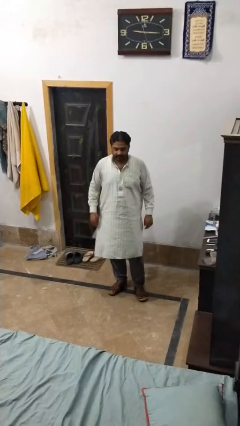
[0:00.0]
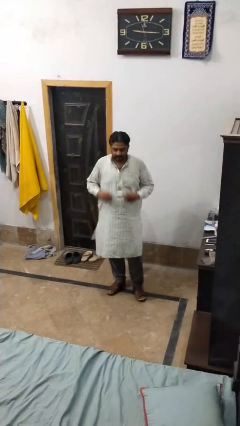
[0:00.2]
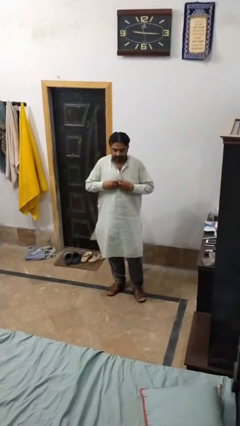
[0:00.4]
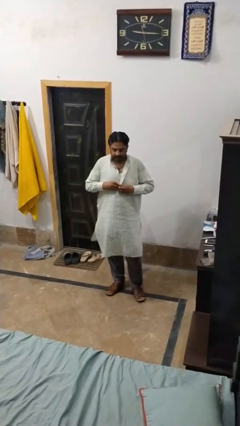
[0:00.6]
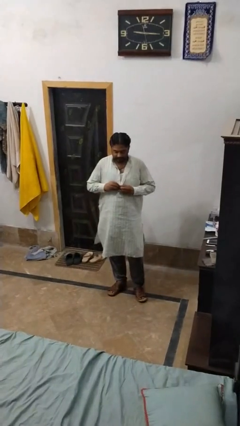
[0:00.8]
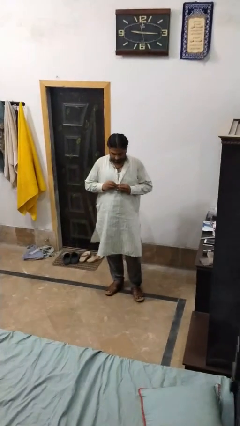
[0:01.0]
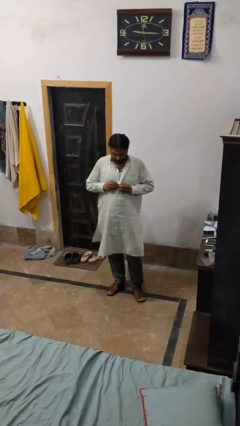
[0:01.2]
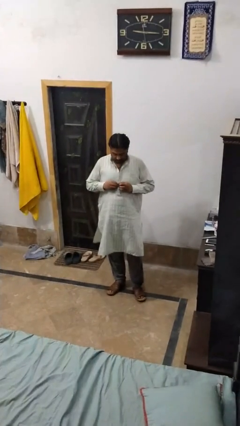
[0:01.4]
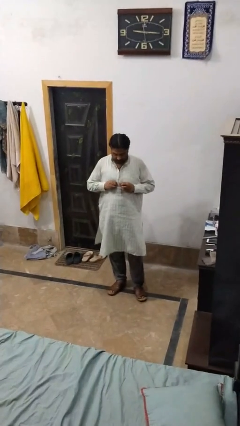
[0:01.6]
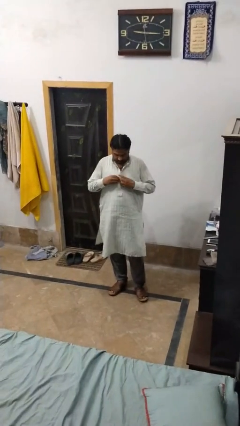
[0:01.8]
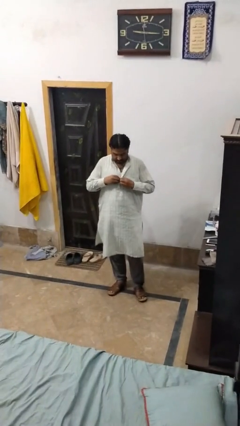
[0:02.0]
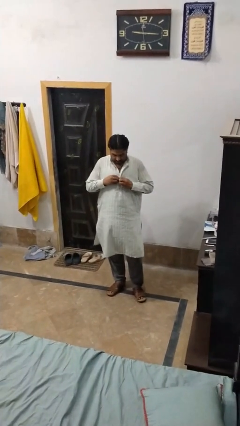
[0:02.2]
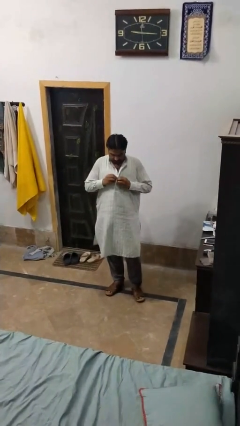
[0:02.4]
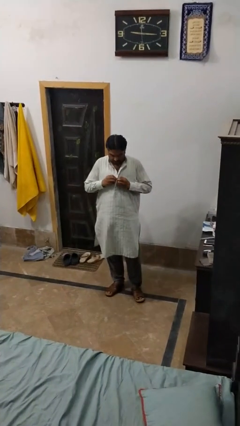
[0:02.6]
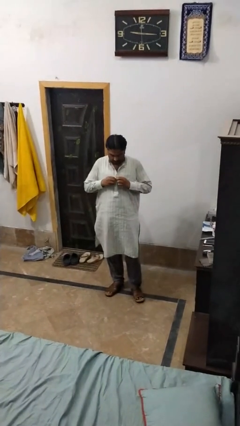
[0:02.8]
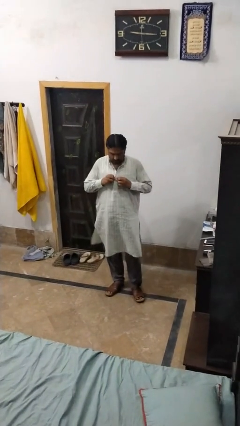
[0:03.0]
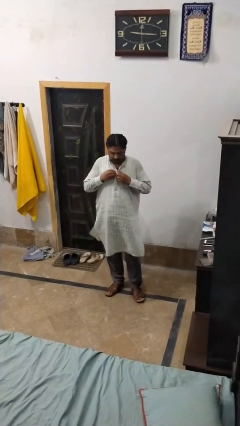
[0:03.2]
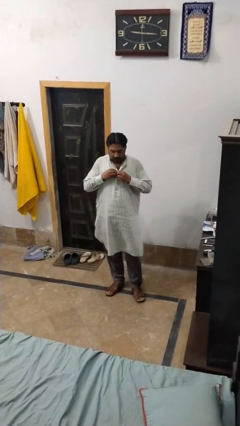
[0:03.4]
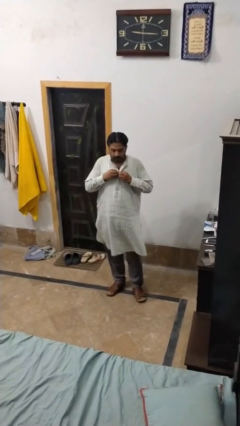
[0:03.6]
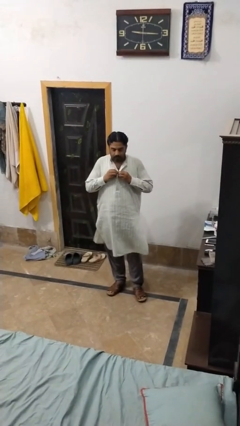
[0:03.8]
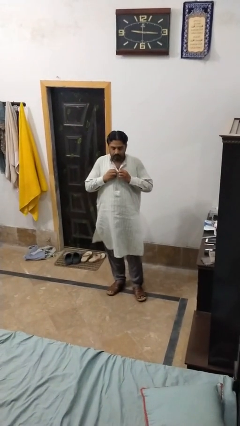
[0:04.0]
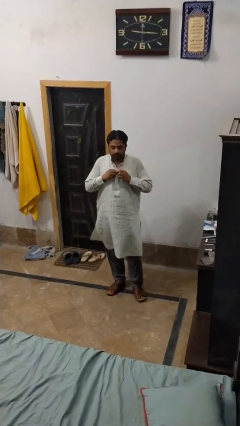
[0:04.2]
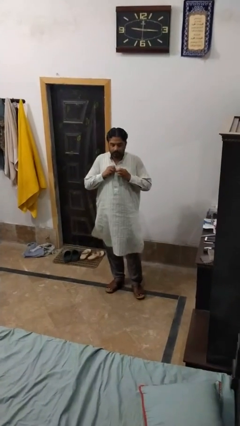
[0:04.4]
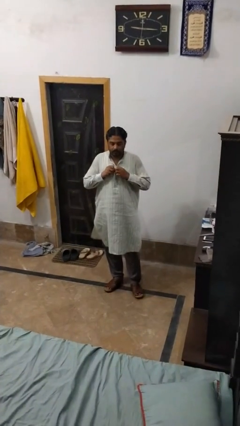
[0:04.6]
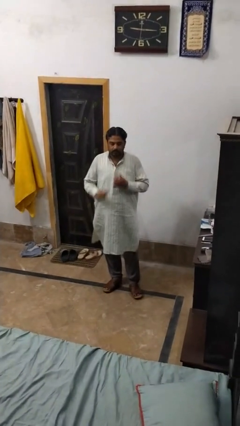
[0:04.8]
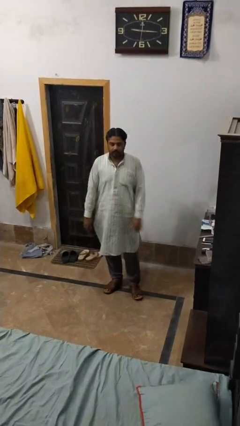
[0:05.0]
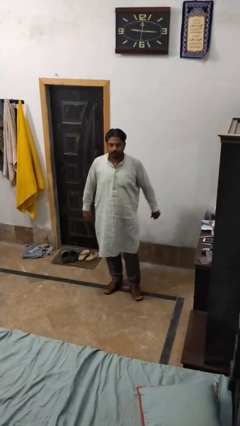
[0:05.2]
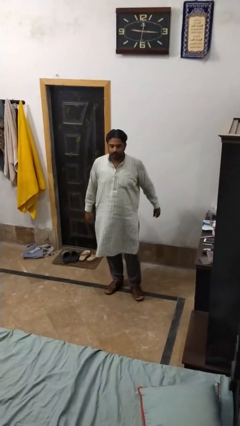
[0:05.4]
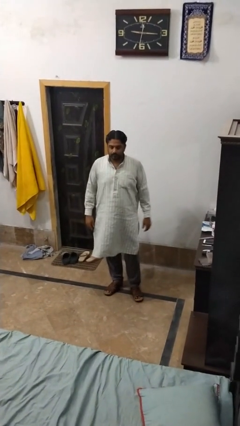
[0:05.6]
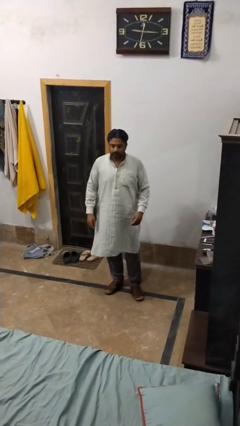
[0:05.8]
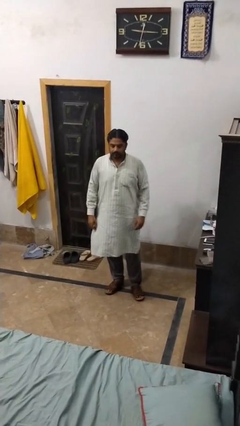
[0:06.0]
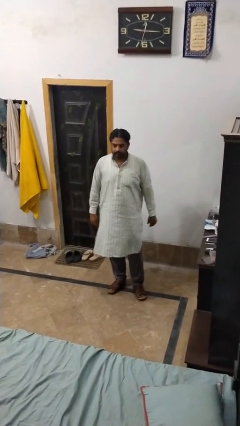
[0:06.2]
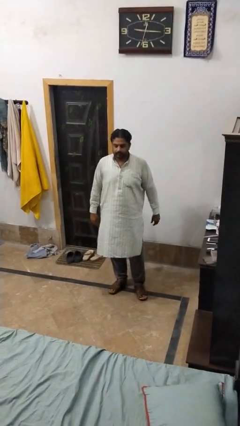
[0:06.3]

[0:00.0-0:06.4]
person buttons shirt

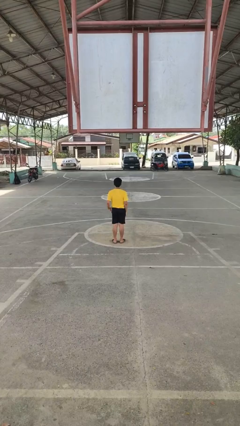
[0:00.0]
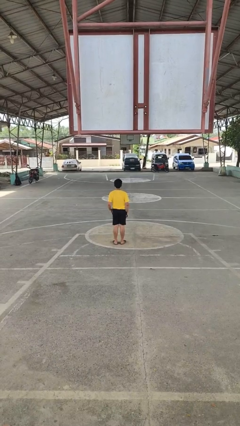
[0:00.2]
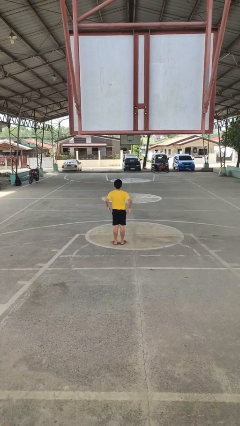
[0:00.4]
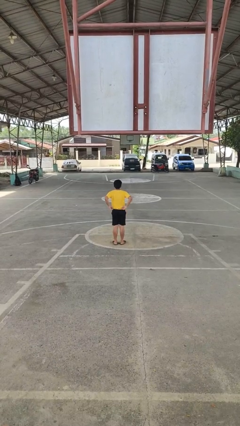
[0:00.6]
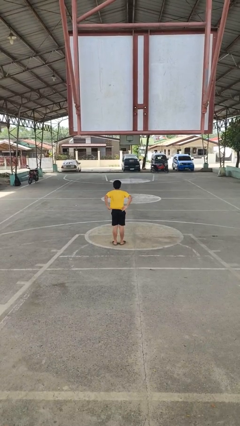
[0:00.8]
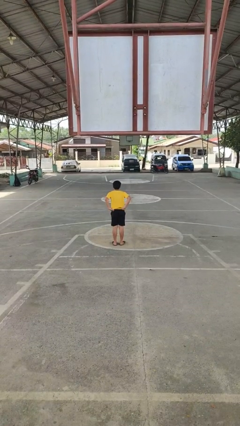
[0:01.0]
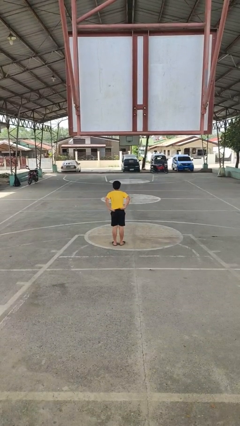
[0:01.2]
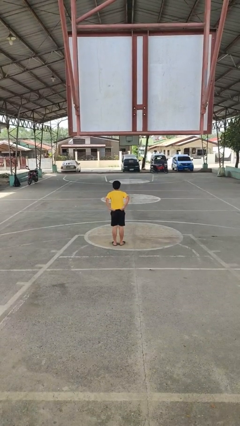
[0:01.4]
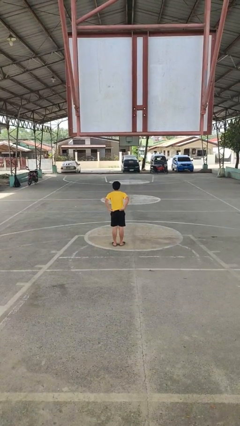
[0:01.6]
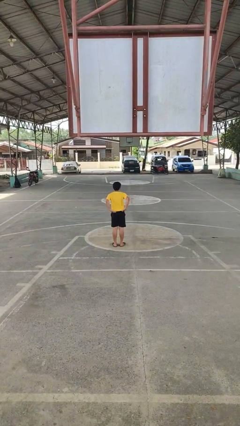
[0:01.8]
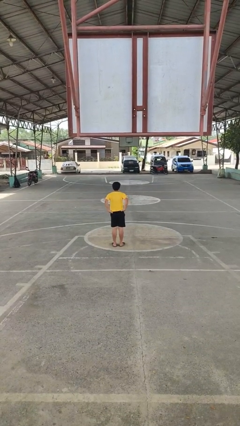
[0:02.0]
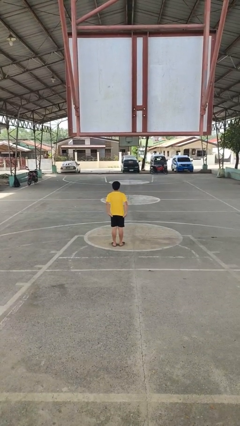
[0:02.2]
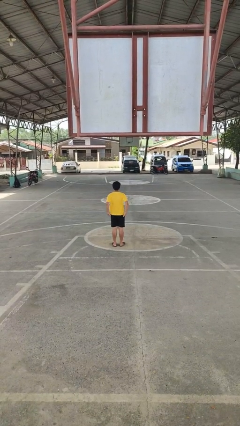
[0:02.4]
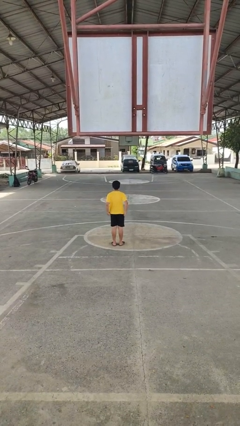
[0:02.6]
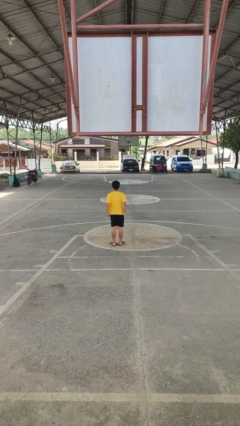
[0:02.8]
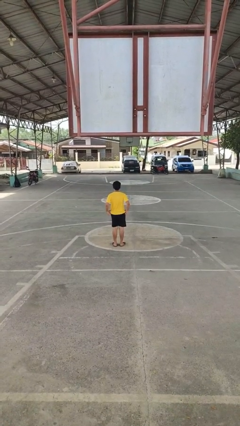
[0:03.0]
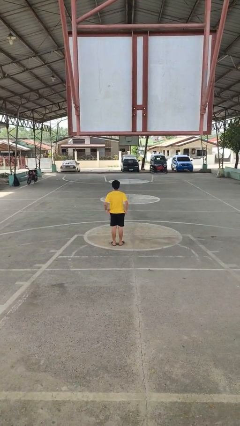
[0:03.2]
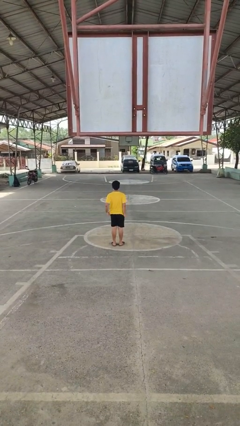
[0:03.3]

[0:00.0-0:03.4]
person untucks shirt

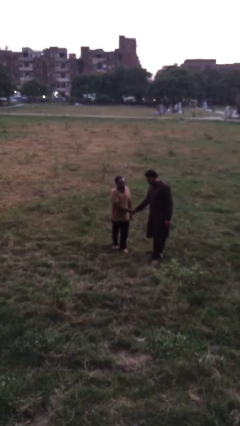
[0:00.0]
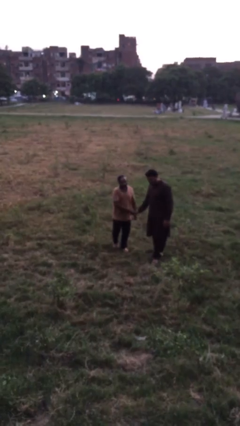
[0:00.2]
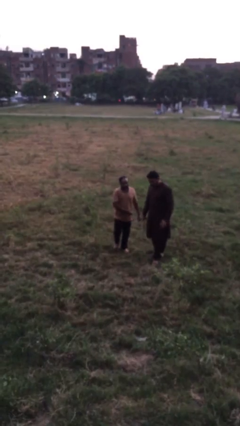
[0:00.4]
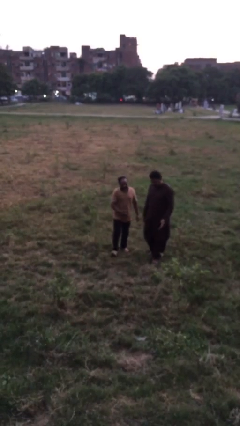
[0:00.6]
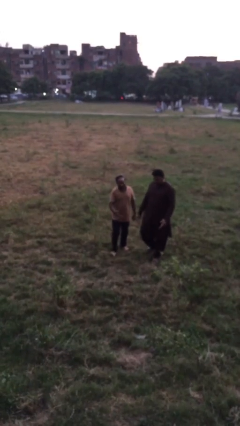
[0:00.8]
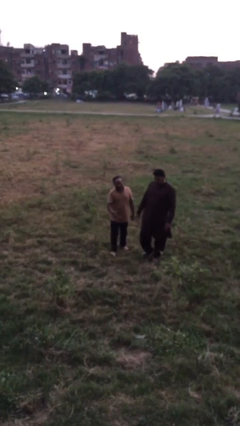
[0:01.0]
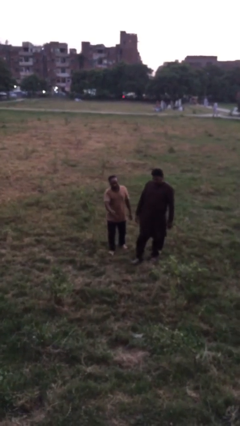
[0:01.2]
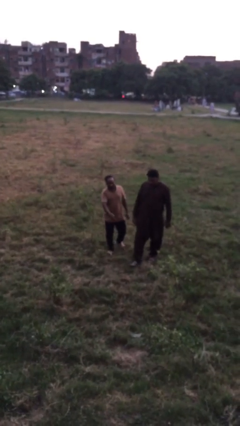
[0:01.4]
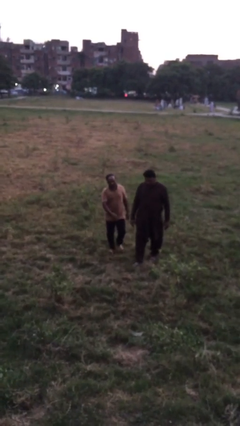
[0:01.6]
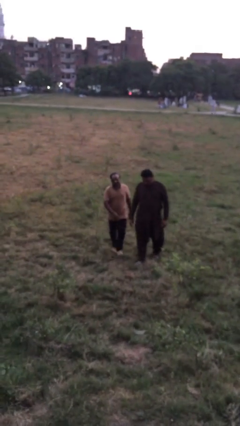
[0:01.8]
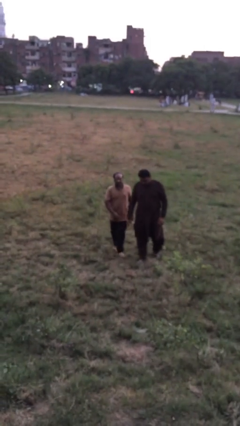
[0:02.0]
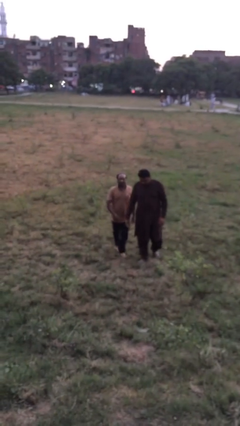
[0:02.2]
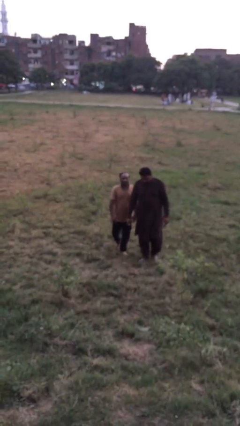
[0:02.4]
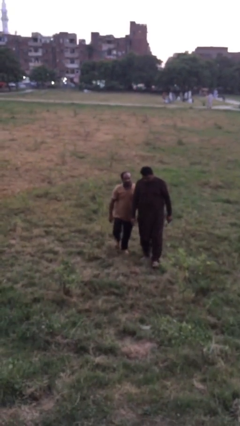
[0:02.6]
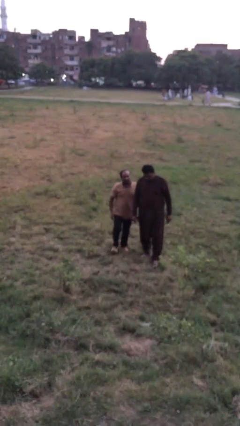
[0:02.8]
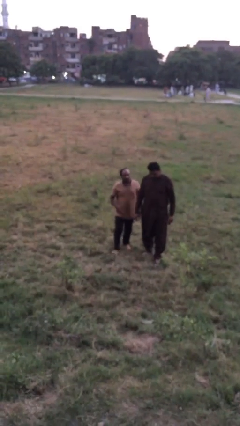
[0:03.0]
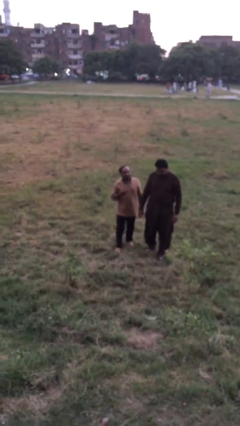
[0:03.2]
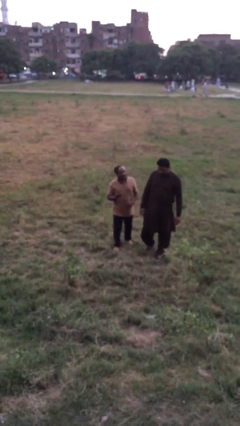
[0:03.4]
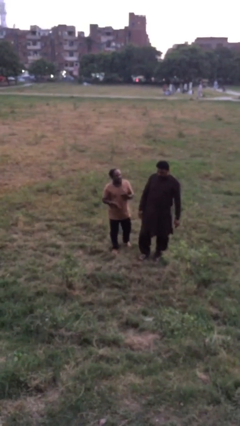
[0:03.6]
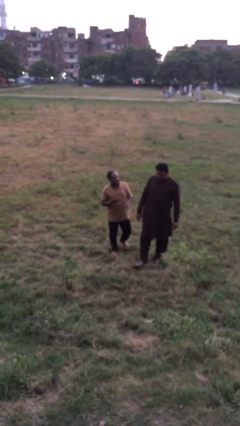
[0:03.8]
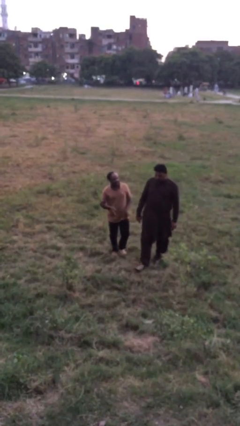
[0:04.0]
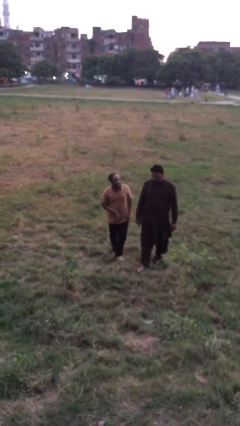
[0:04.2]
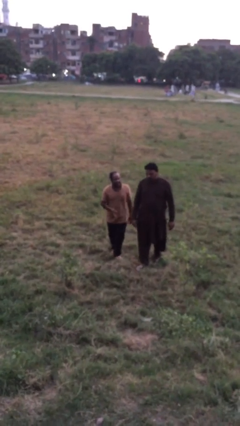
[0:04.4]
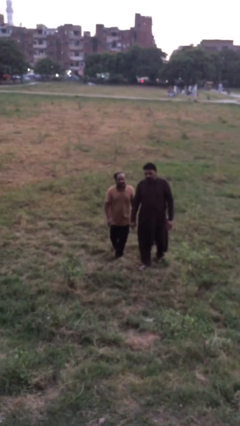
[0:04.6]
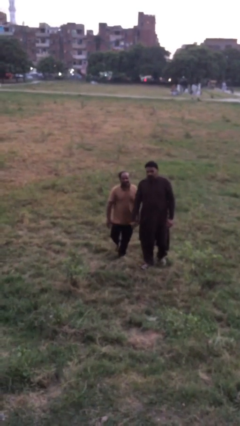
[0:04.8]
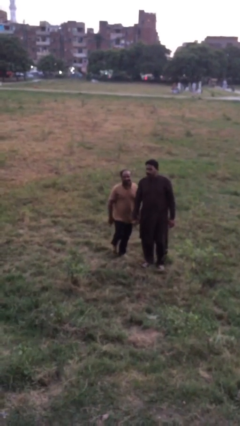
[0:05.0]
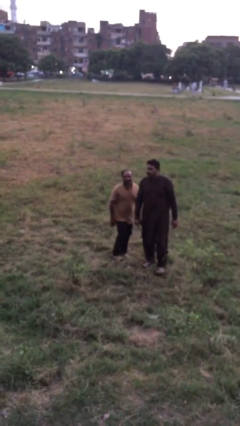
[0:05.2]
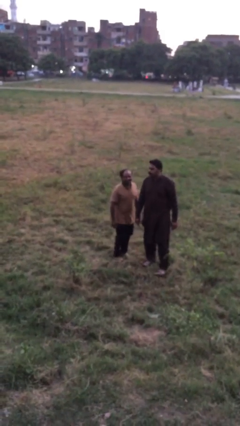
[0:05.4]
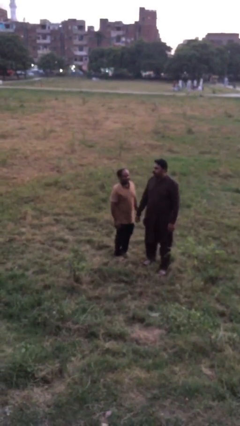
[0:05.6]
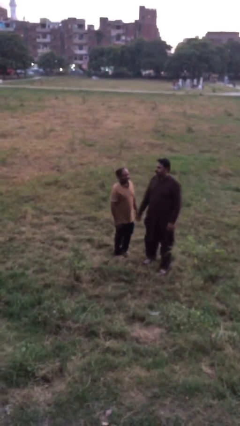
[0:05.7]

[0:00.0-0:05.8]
person talks to person

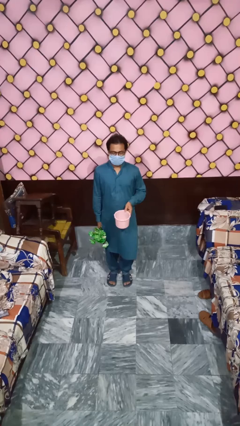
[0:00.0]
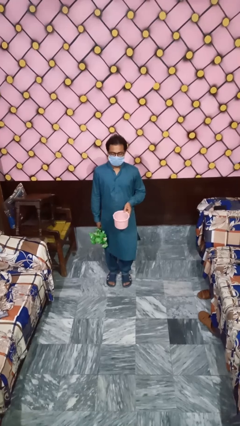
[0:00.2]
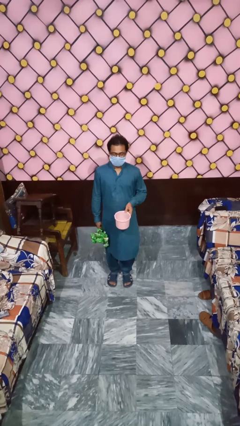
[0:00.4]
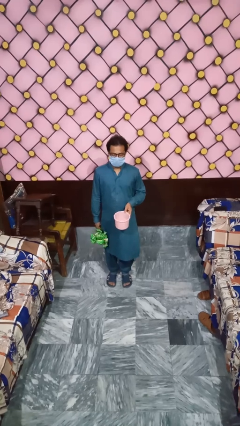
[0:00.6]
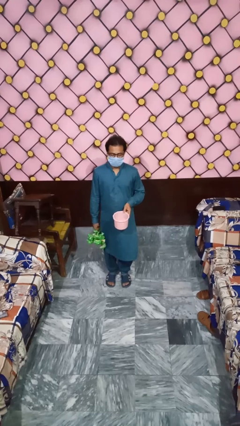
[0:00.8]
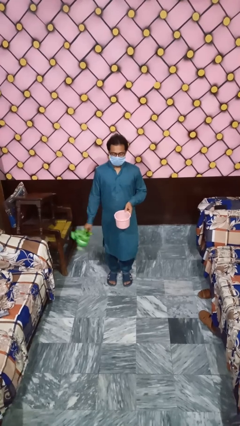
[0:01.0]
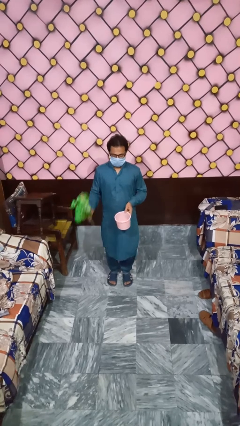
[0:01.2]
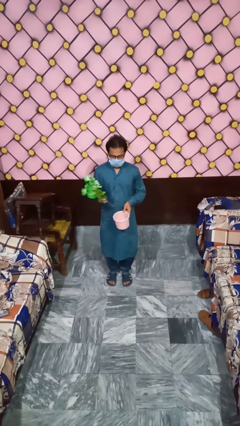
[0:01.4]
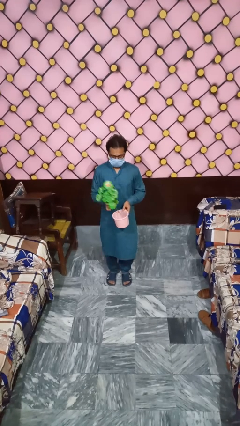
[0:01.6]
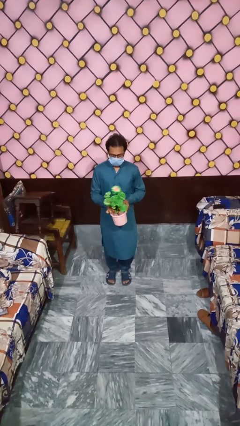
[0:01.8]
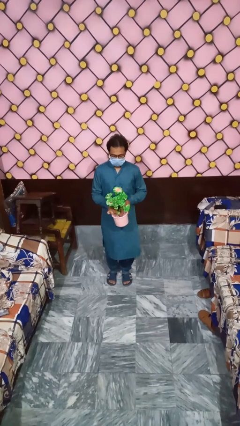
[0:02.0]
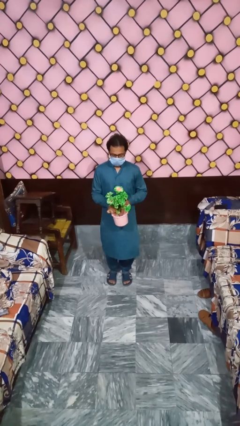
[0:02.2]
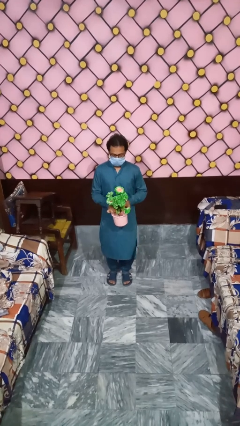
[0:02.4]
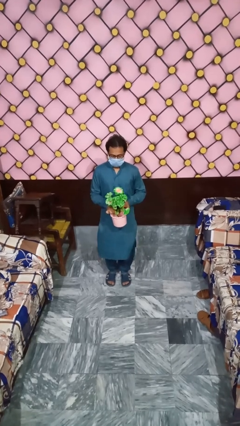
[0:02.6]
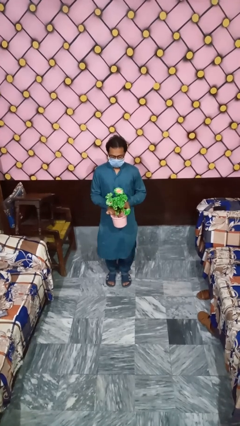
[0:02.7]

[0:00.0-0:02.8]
person arranges flowers in vase
